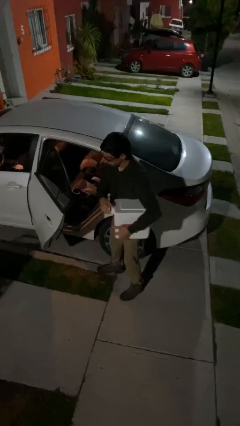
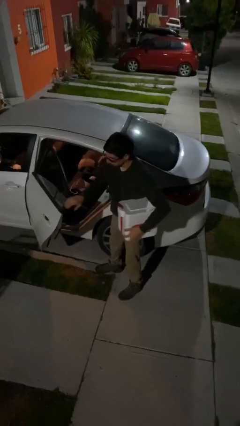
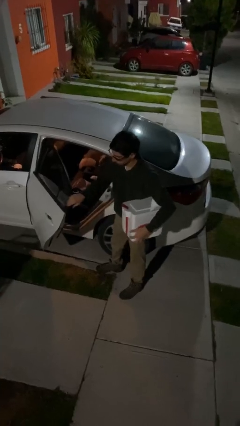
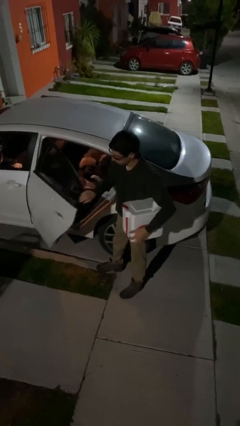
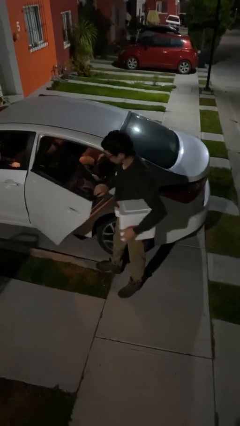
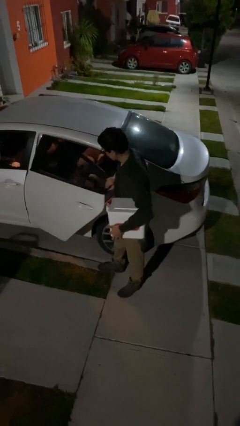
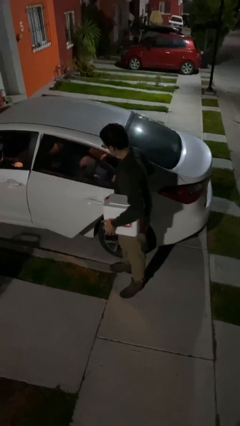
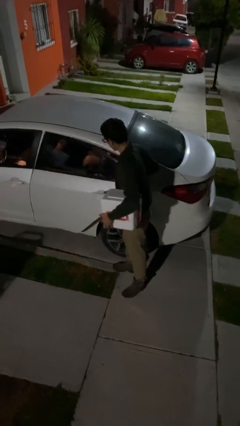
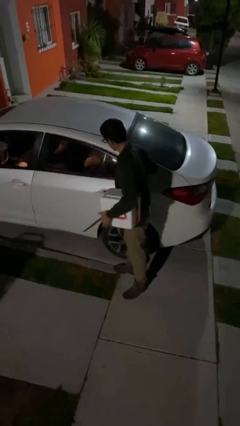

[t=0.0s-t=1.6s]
person closes car door

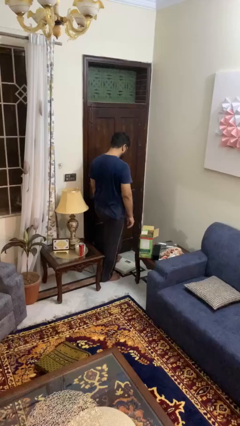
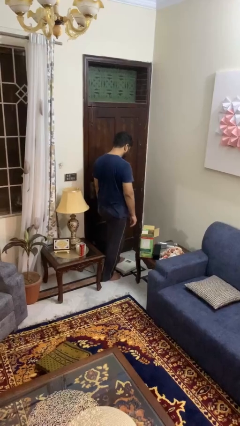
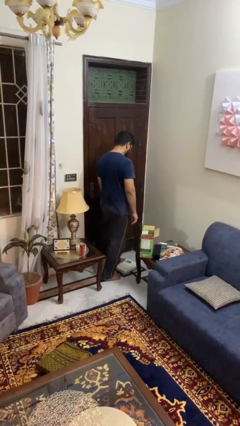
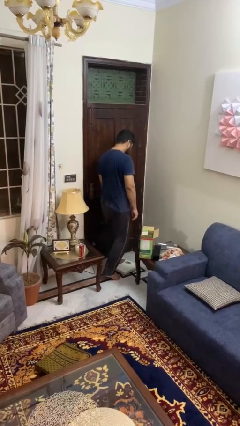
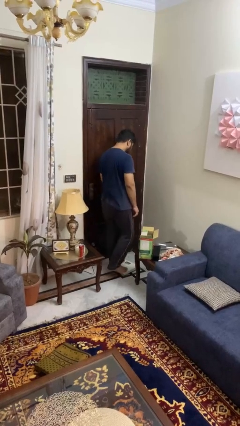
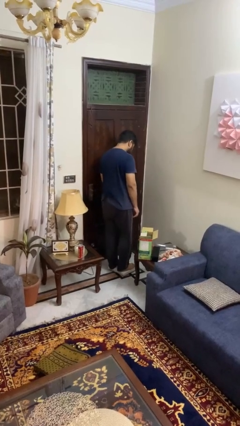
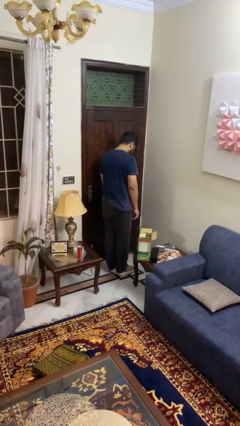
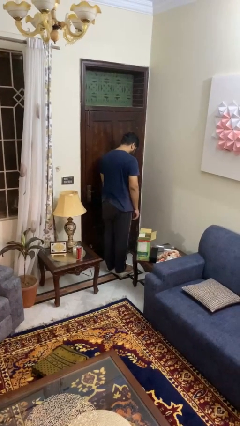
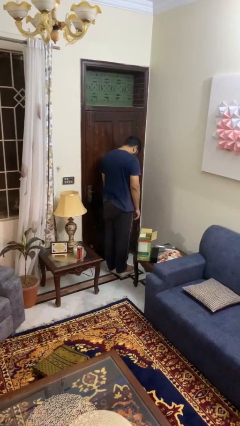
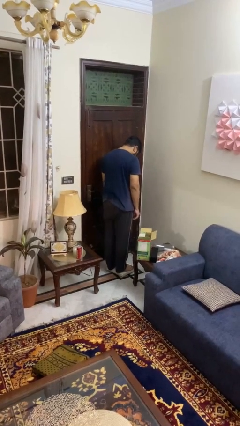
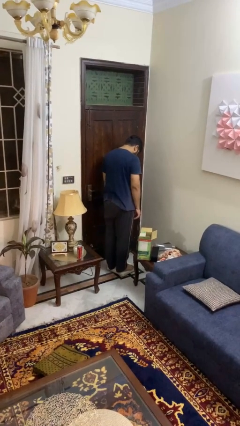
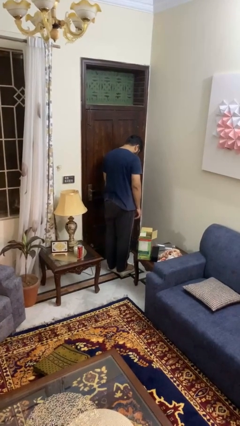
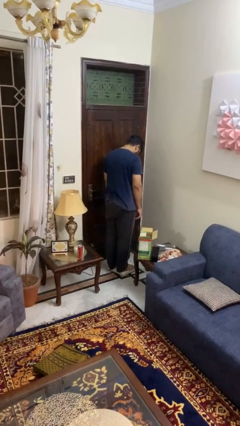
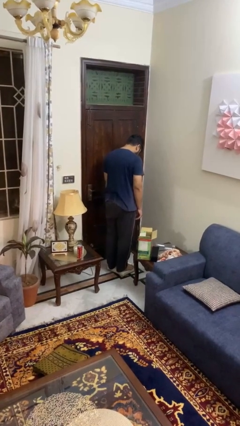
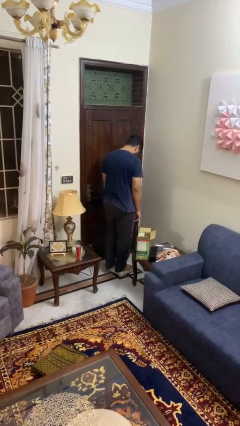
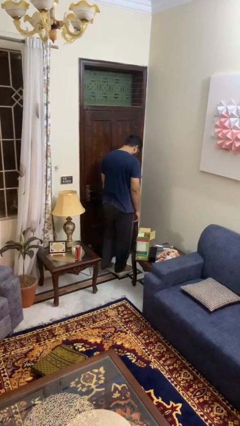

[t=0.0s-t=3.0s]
person uses bodyweight scale

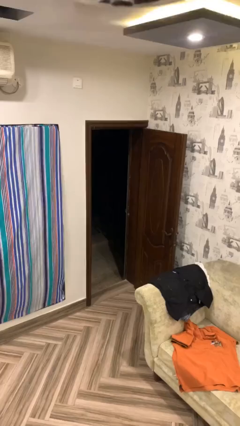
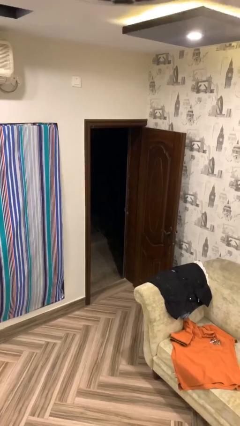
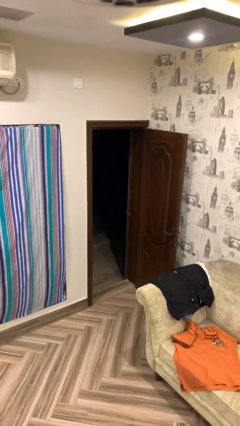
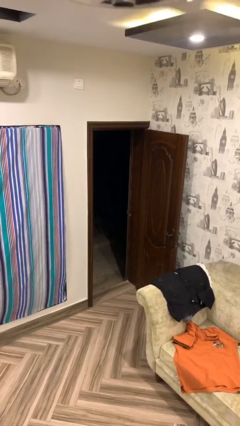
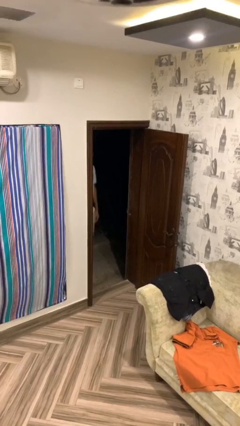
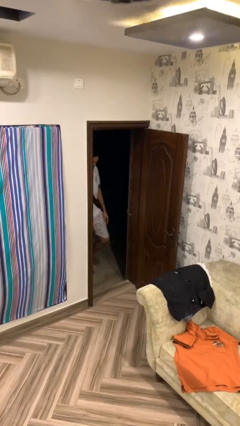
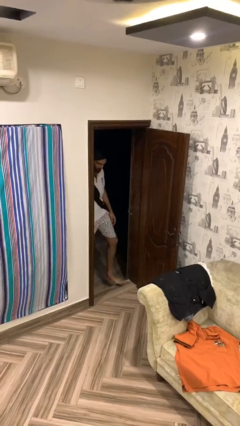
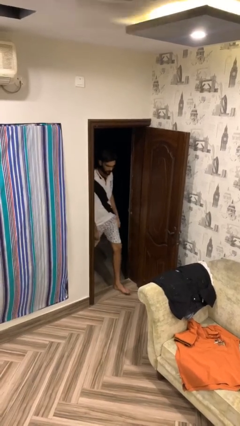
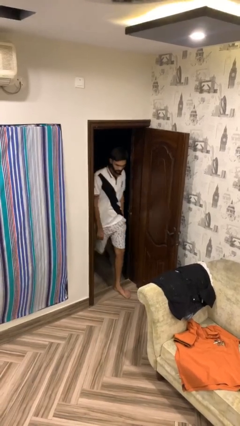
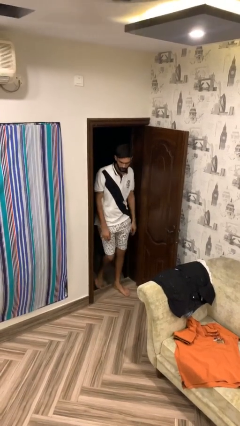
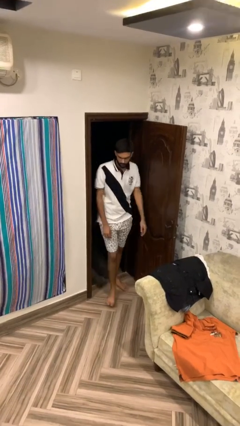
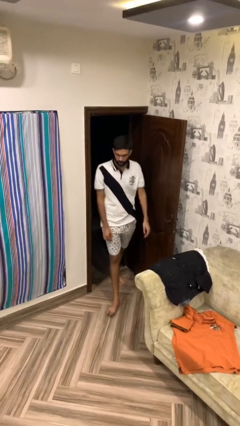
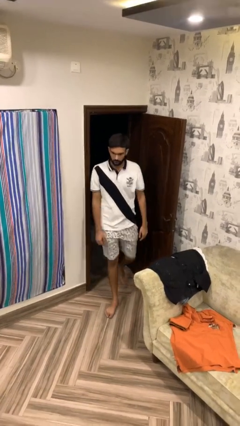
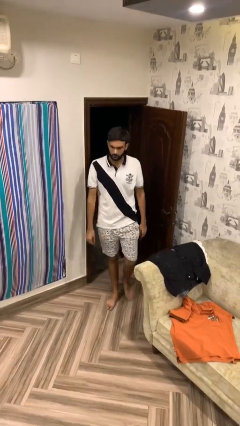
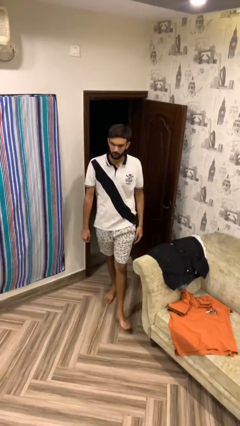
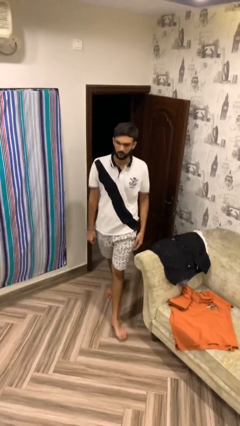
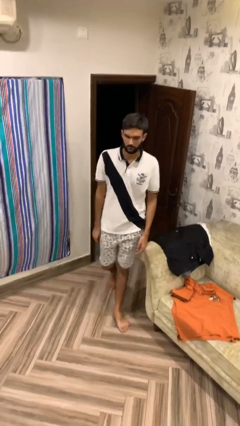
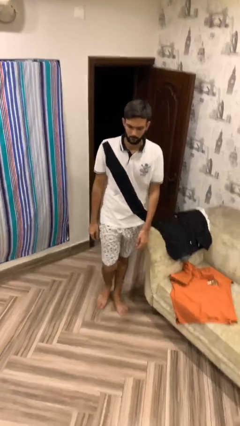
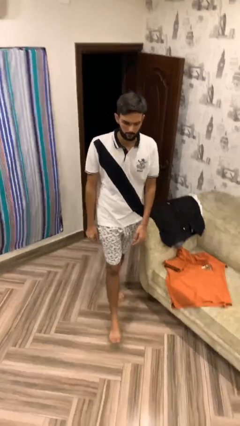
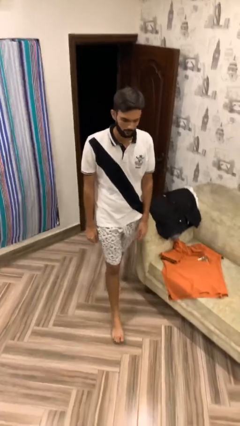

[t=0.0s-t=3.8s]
person enters scene through structure

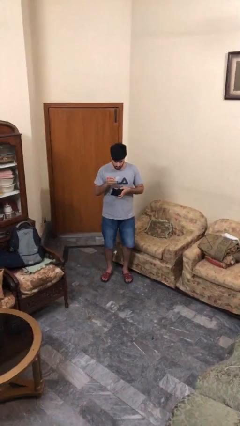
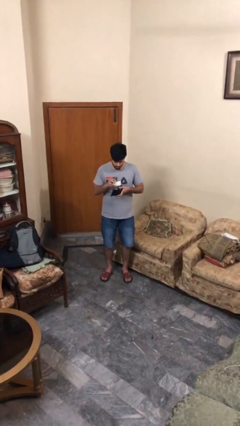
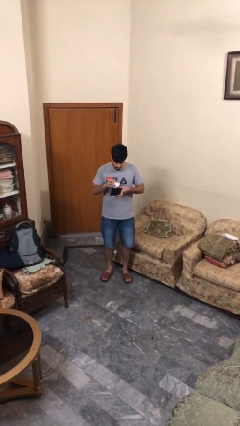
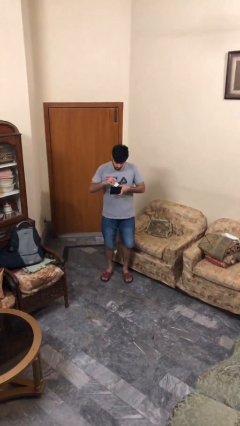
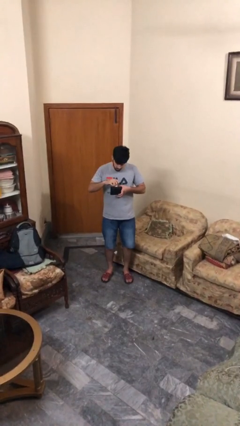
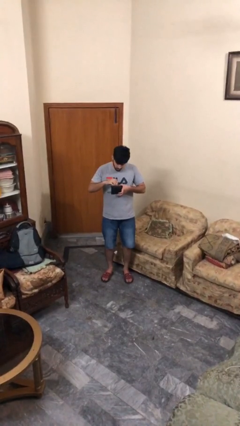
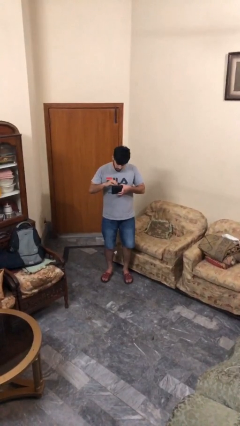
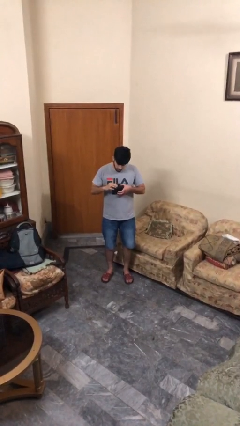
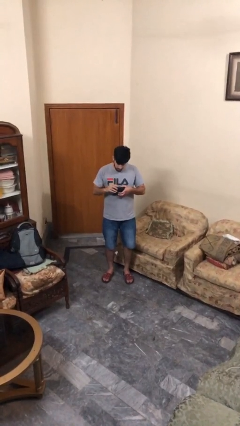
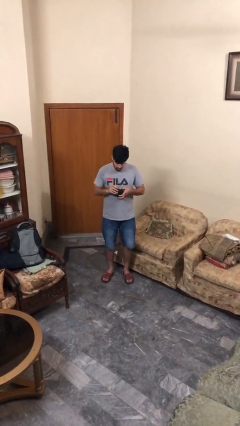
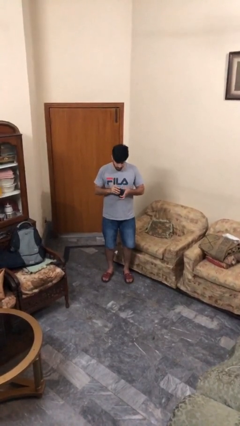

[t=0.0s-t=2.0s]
person puts object into purse

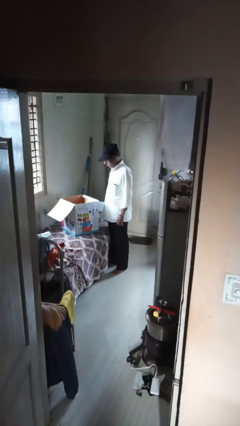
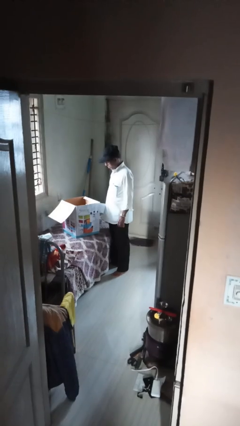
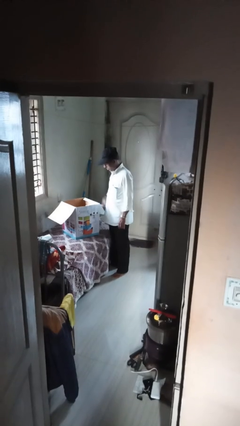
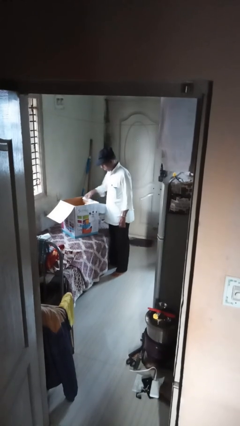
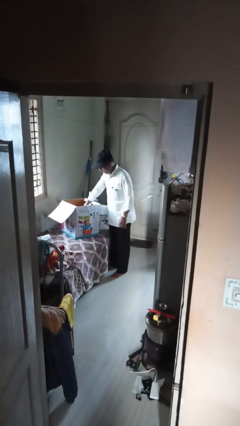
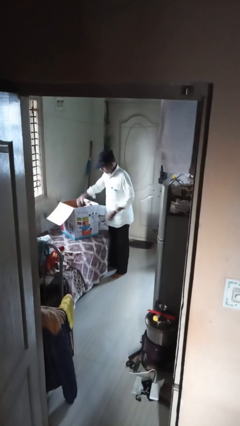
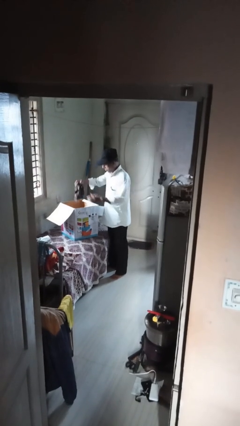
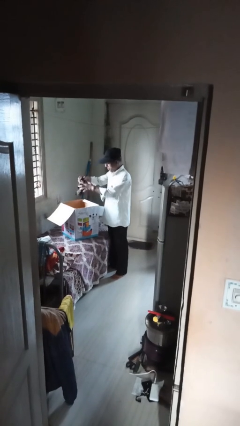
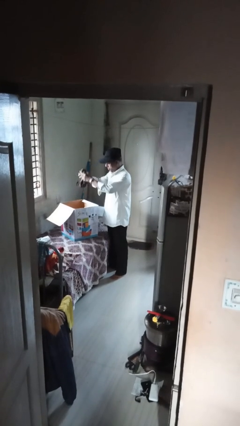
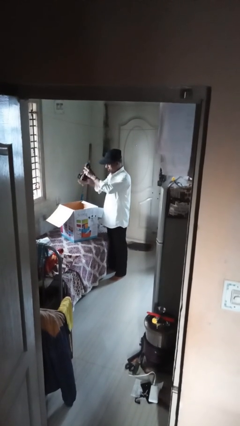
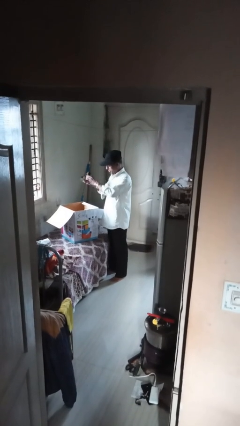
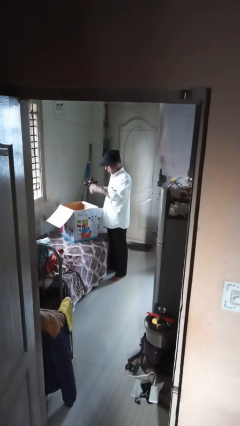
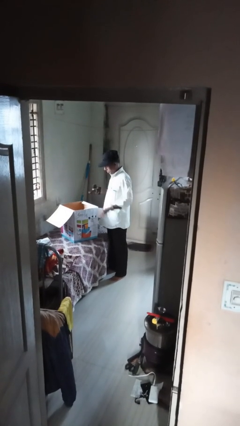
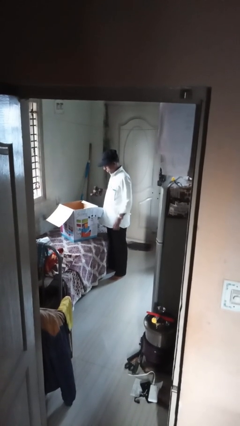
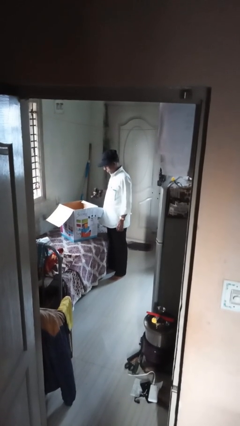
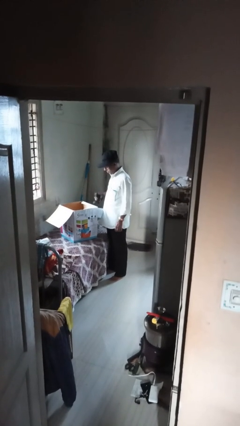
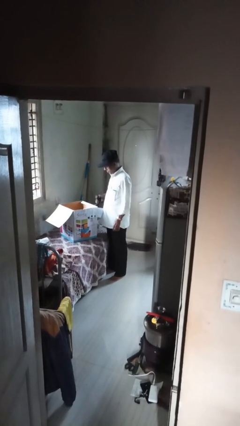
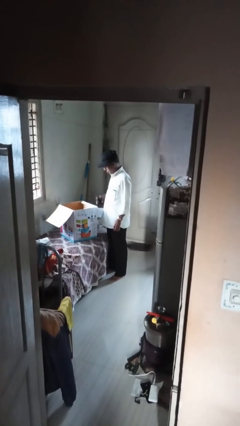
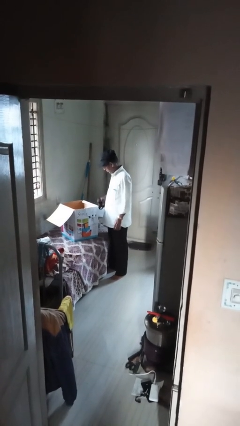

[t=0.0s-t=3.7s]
person takes object from box

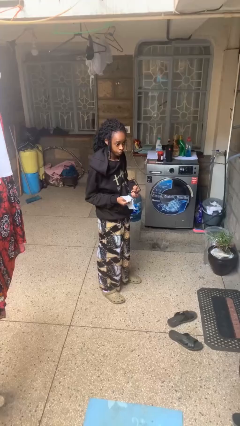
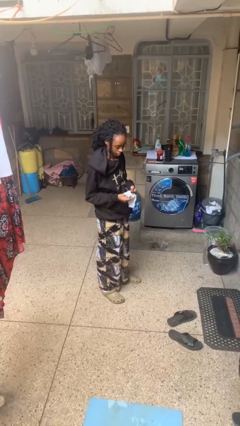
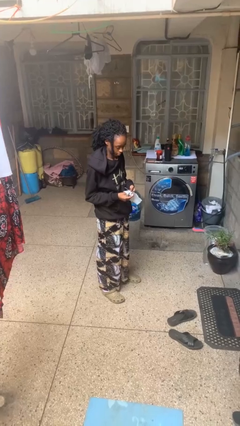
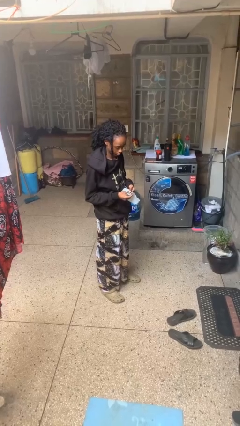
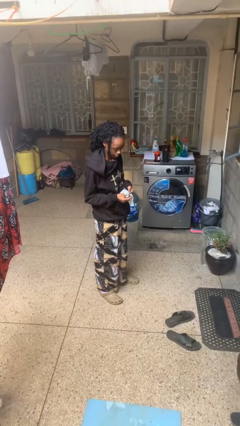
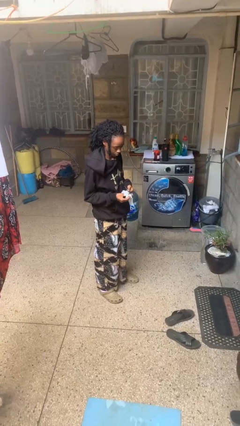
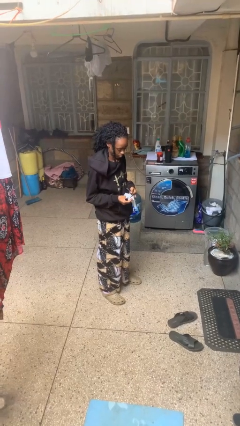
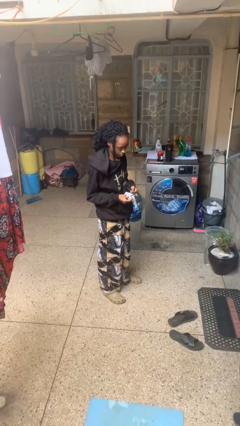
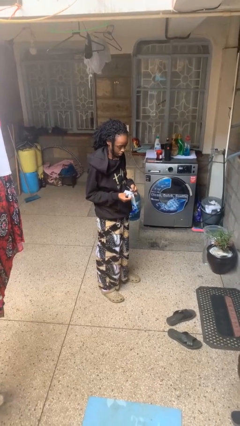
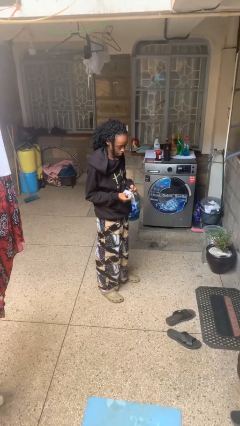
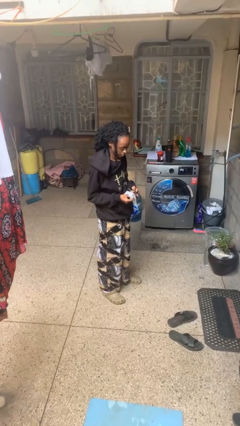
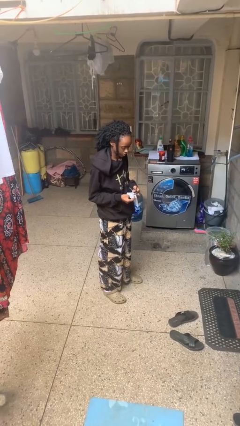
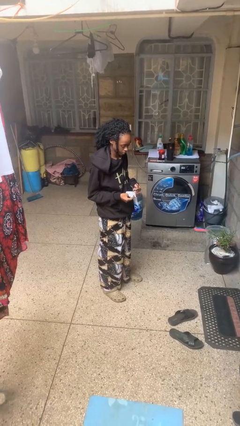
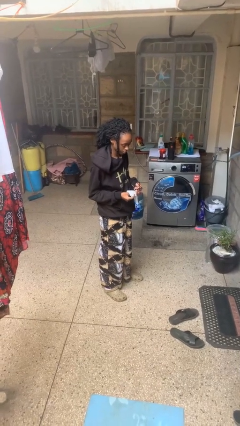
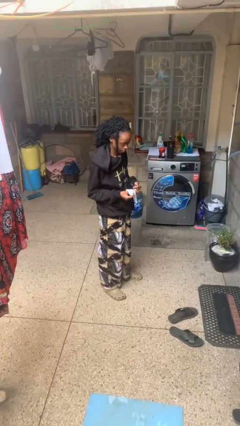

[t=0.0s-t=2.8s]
person cleans eyeglasses

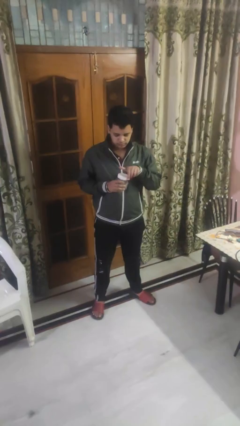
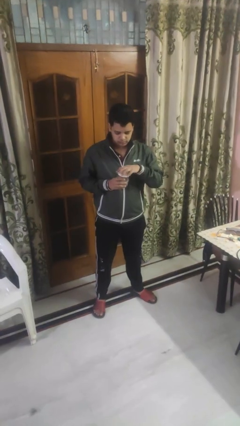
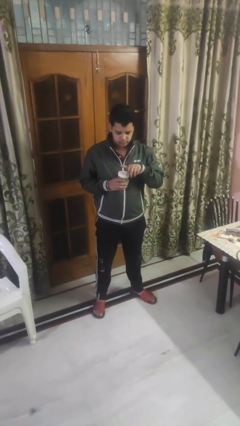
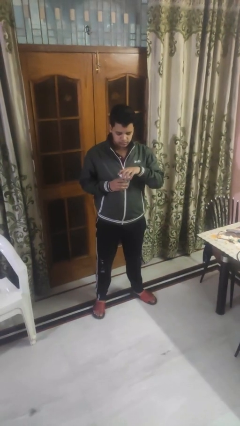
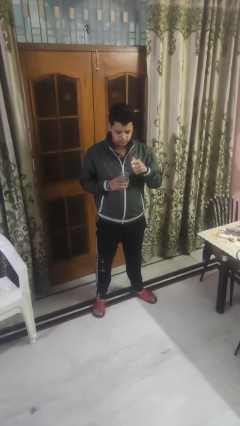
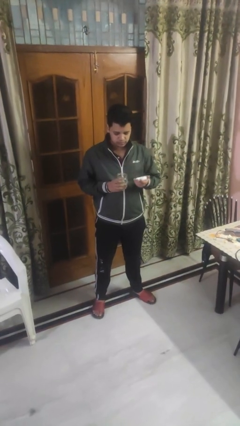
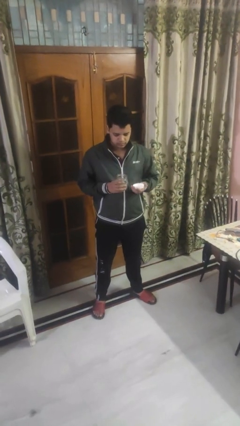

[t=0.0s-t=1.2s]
person opens jar
